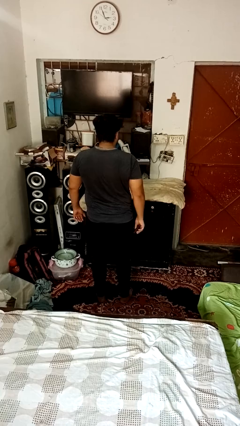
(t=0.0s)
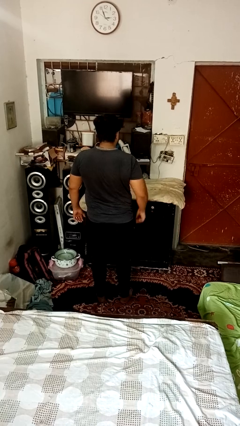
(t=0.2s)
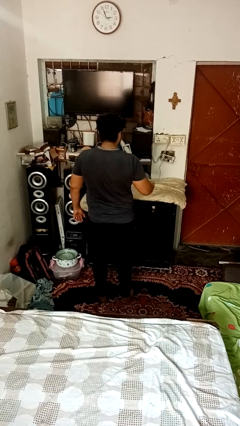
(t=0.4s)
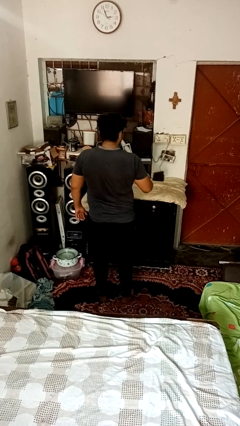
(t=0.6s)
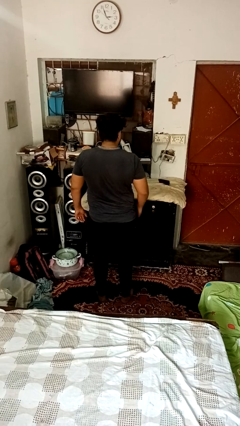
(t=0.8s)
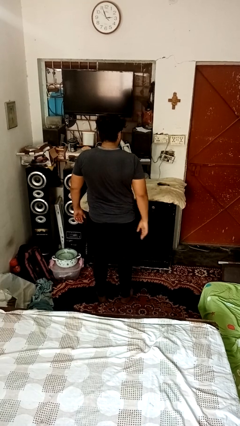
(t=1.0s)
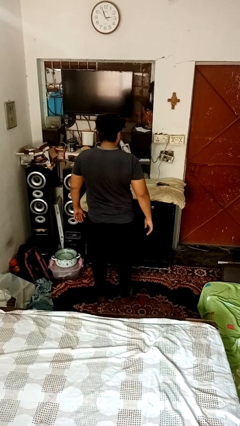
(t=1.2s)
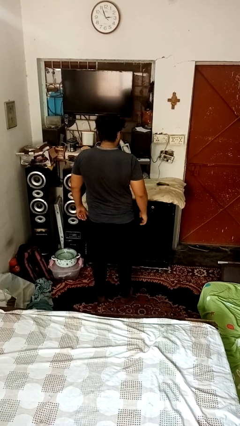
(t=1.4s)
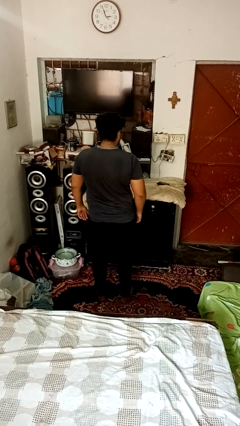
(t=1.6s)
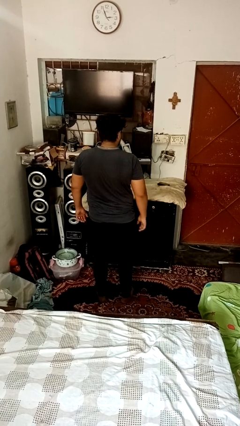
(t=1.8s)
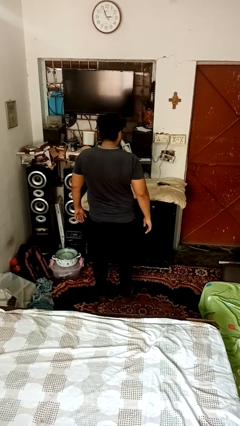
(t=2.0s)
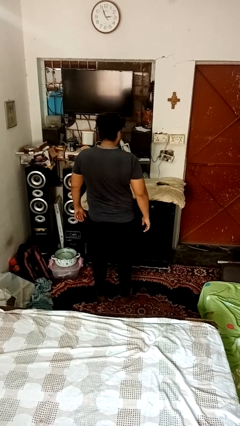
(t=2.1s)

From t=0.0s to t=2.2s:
person throws object on table

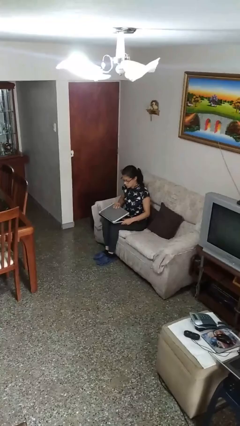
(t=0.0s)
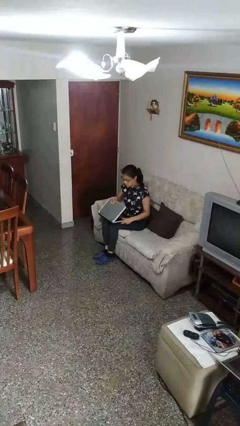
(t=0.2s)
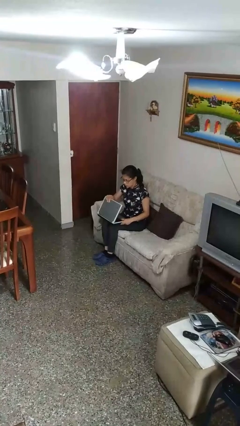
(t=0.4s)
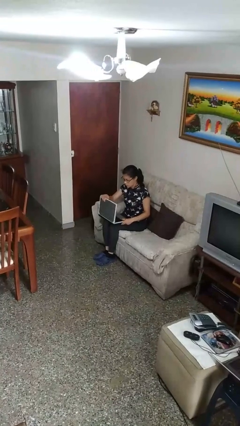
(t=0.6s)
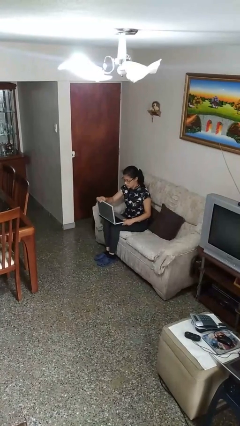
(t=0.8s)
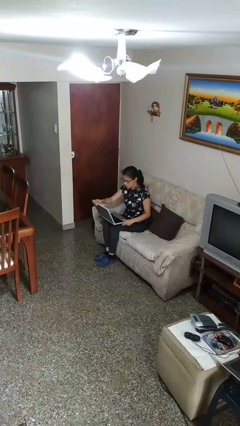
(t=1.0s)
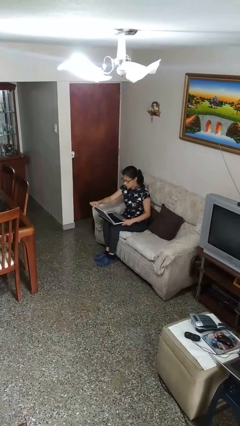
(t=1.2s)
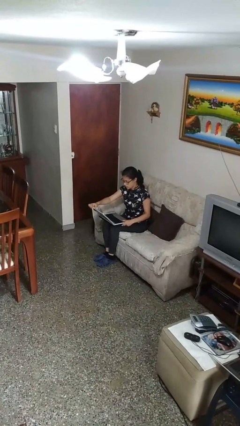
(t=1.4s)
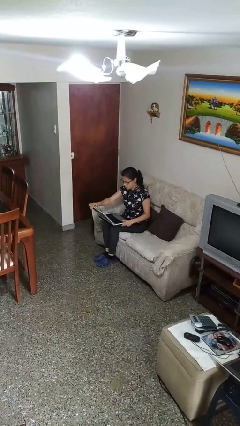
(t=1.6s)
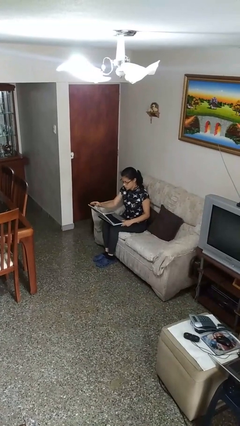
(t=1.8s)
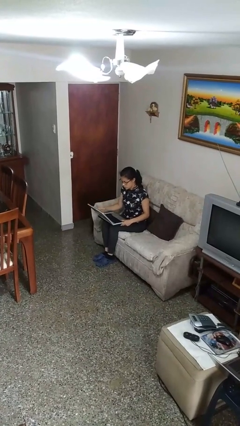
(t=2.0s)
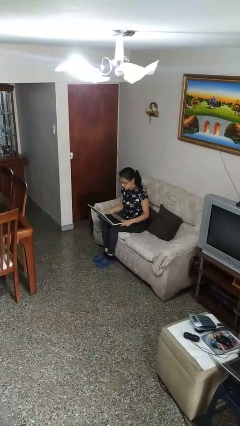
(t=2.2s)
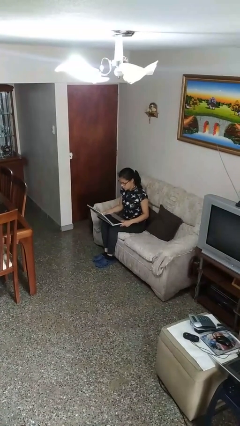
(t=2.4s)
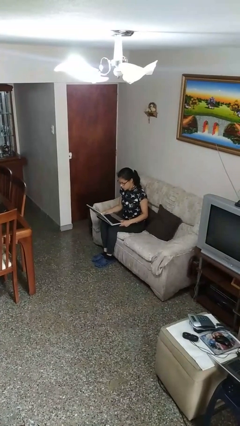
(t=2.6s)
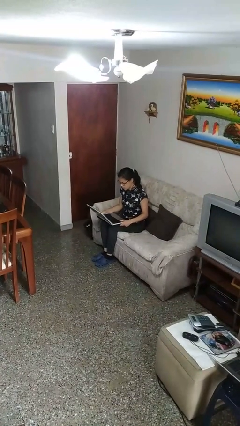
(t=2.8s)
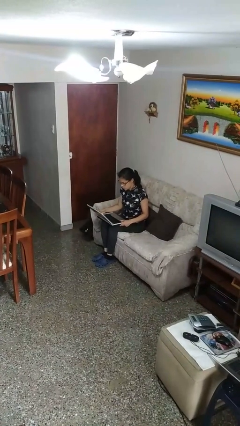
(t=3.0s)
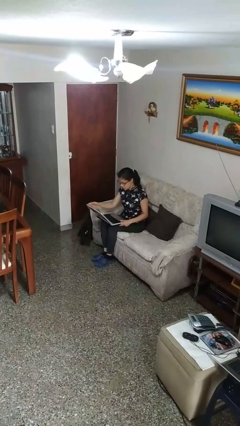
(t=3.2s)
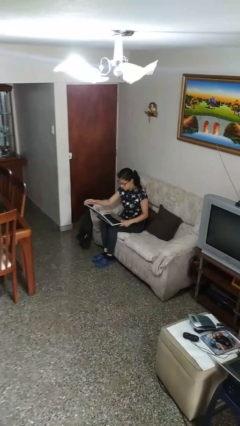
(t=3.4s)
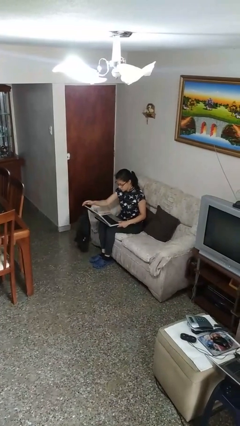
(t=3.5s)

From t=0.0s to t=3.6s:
person opens laptop

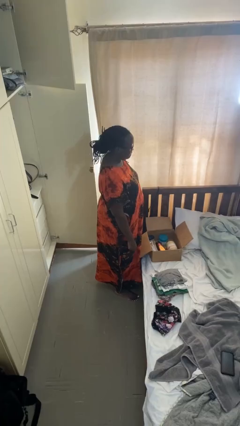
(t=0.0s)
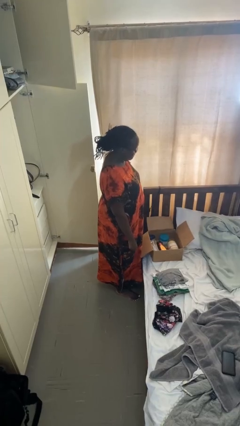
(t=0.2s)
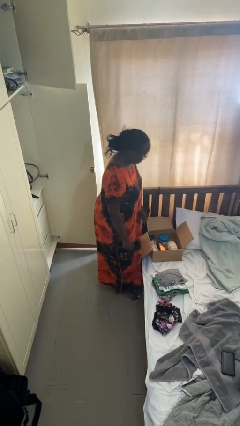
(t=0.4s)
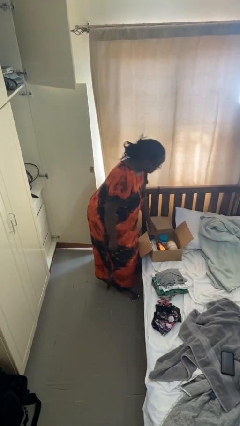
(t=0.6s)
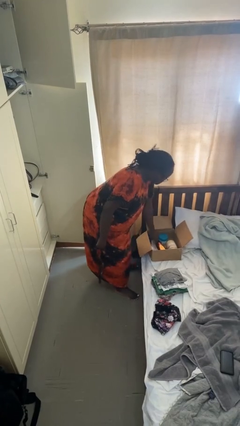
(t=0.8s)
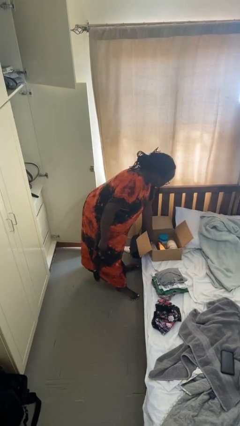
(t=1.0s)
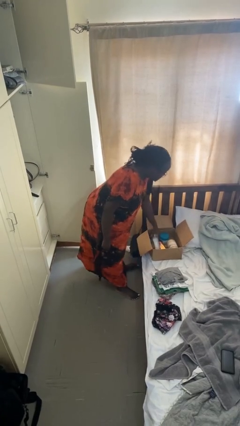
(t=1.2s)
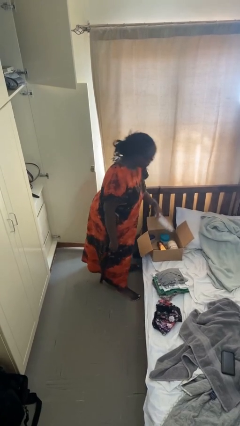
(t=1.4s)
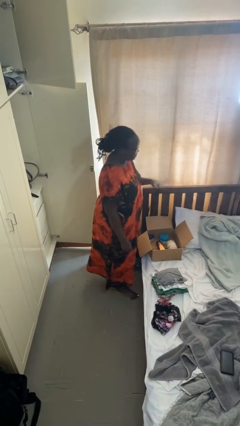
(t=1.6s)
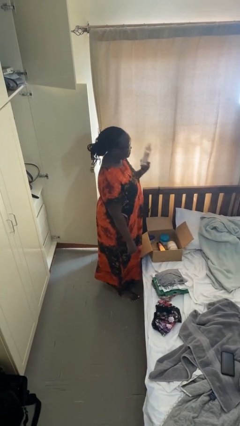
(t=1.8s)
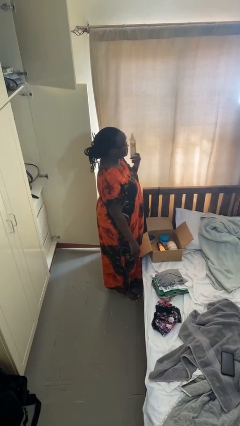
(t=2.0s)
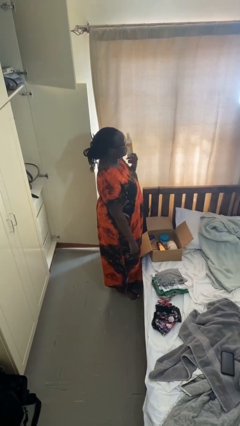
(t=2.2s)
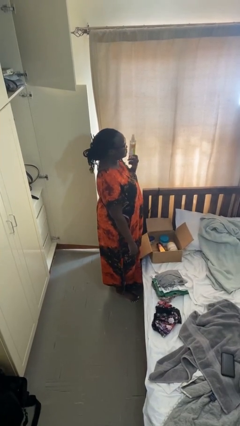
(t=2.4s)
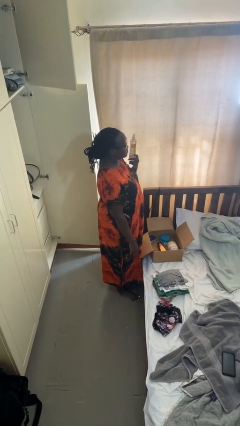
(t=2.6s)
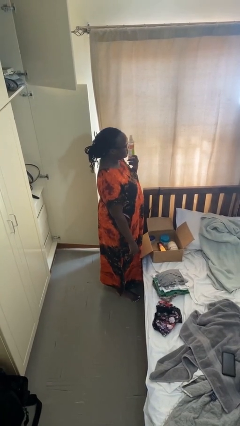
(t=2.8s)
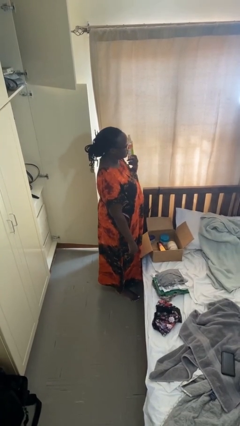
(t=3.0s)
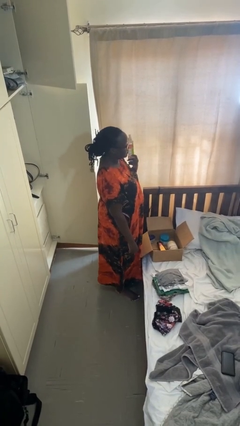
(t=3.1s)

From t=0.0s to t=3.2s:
person takes object from box

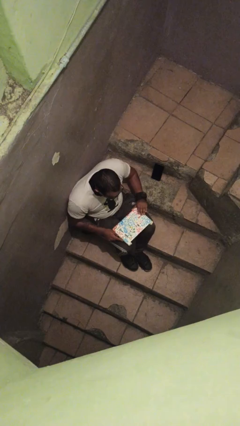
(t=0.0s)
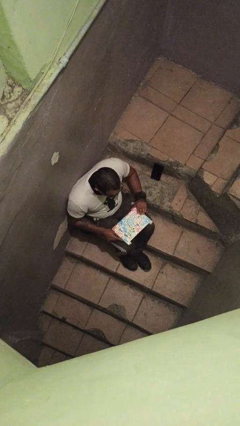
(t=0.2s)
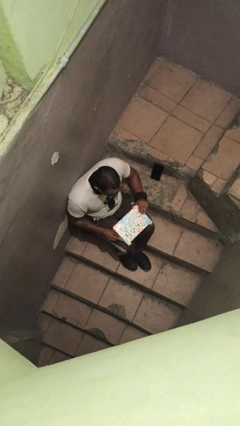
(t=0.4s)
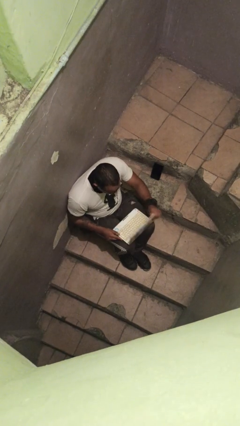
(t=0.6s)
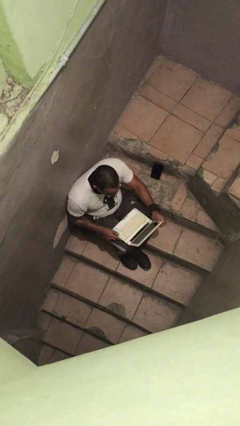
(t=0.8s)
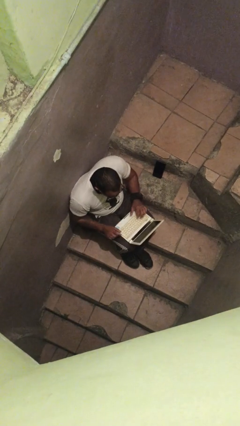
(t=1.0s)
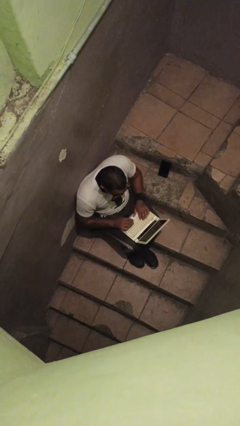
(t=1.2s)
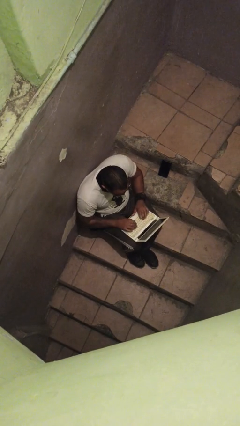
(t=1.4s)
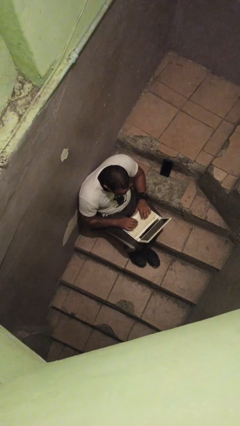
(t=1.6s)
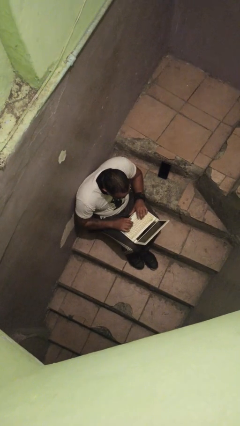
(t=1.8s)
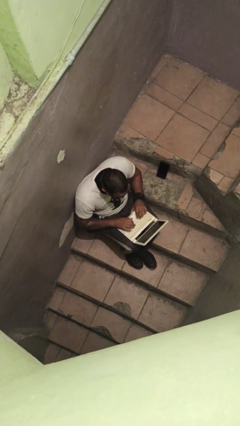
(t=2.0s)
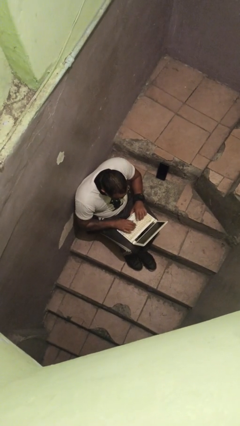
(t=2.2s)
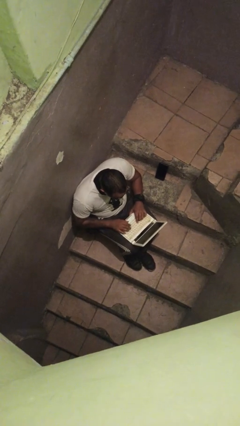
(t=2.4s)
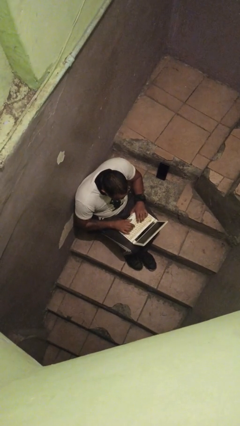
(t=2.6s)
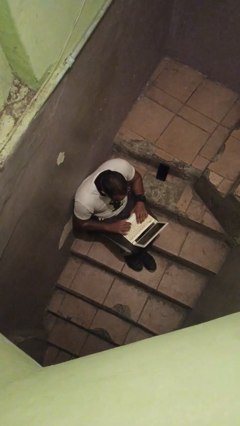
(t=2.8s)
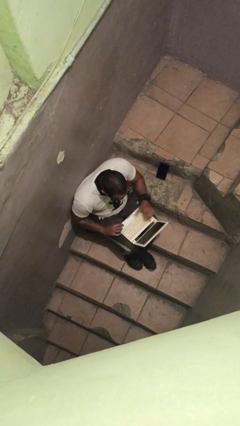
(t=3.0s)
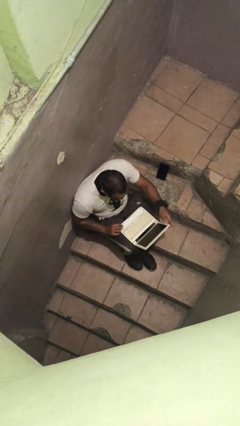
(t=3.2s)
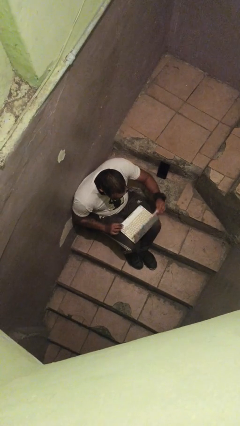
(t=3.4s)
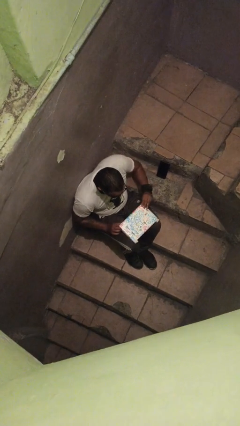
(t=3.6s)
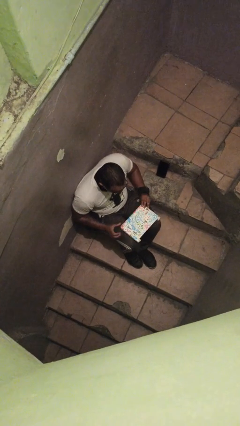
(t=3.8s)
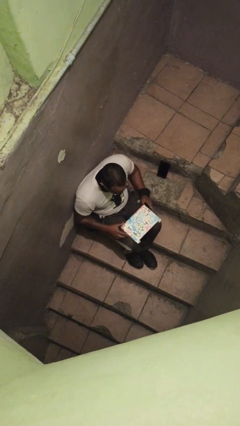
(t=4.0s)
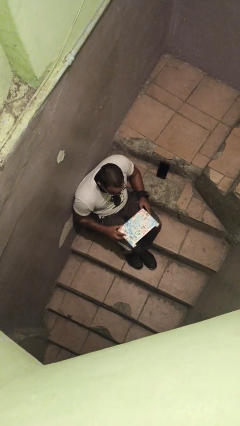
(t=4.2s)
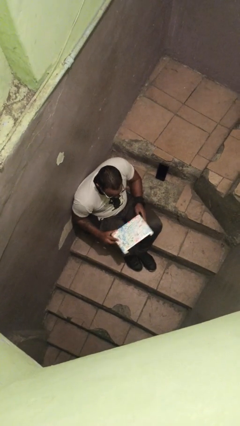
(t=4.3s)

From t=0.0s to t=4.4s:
person interacts with laptop

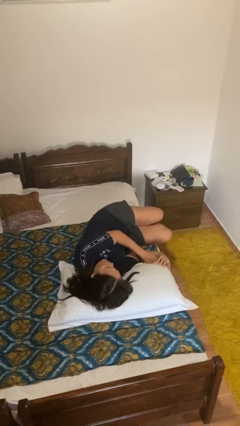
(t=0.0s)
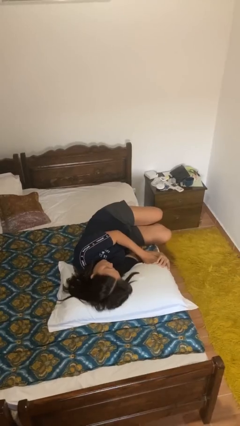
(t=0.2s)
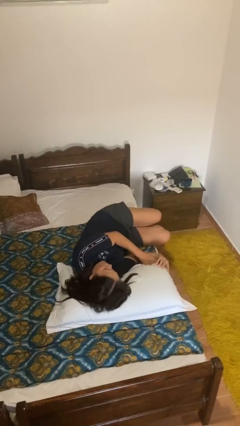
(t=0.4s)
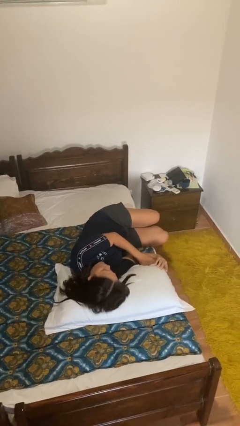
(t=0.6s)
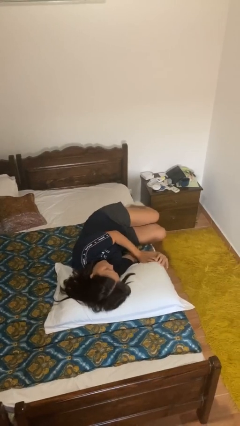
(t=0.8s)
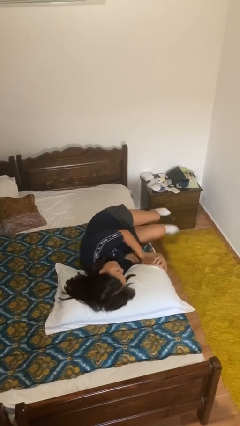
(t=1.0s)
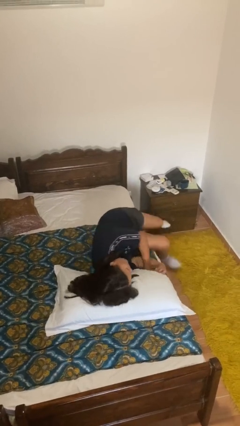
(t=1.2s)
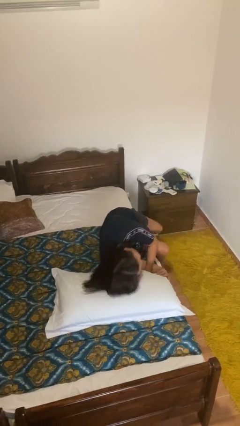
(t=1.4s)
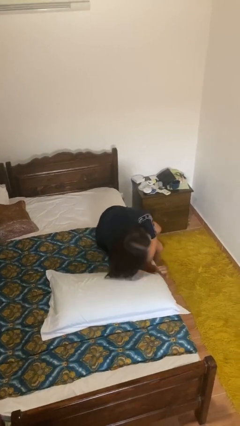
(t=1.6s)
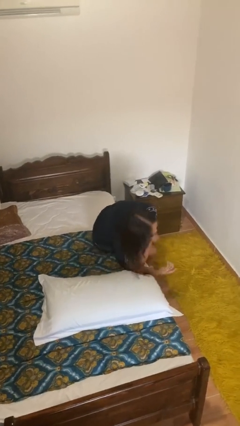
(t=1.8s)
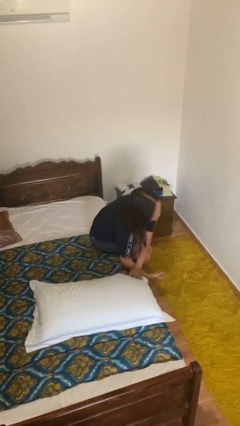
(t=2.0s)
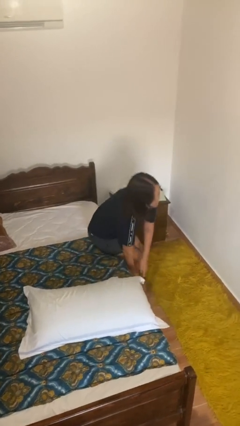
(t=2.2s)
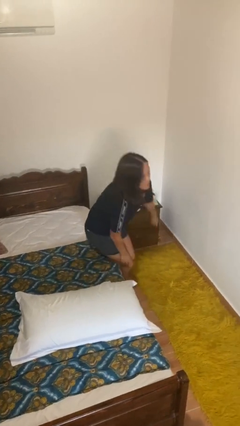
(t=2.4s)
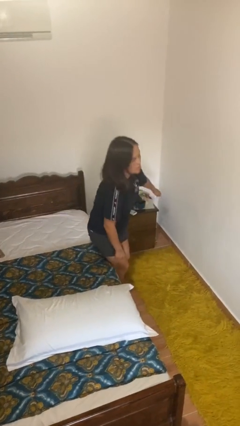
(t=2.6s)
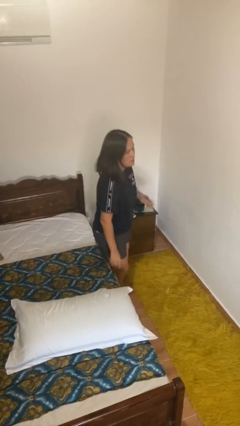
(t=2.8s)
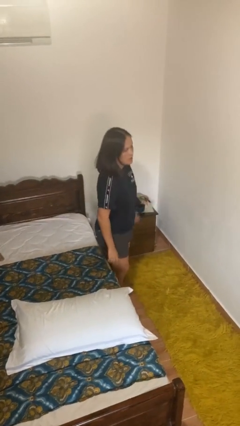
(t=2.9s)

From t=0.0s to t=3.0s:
person stands up

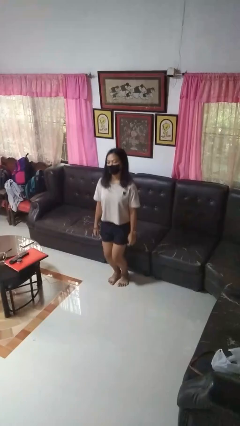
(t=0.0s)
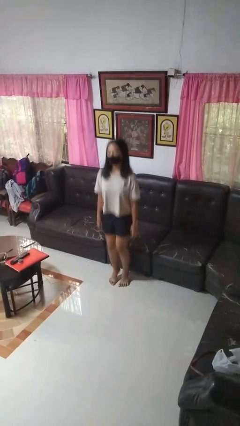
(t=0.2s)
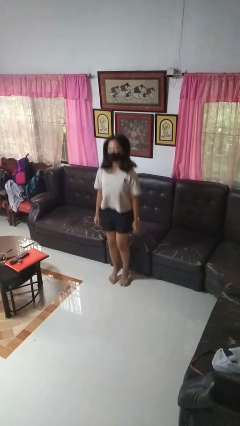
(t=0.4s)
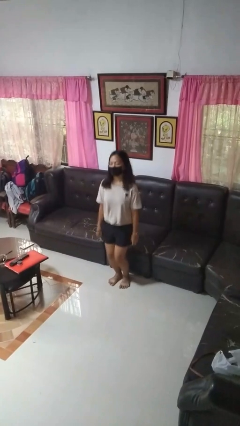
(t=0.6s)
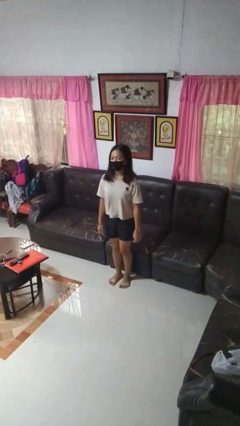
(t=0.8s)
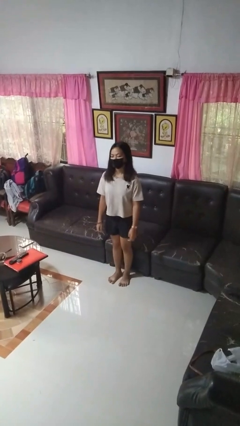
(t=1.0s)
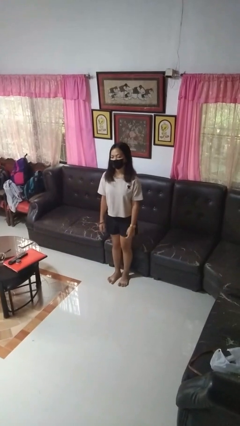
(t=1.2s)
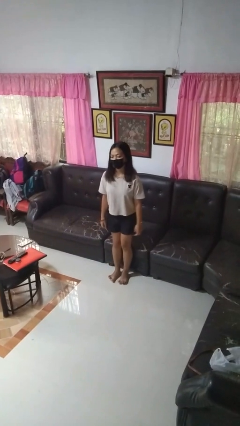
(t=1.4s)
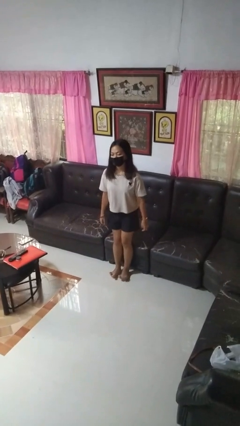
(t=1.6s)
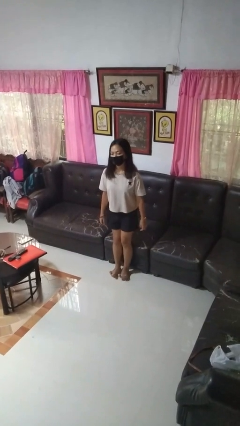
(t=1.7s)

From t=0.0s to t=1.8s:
person jumps
